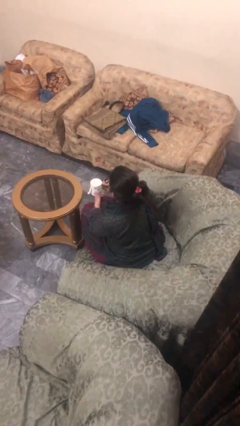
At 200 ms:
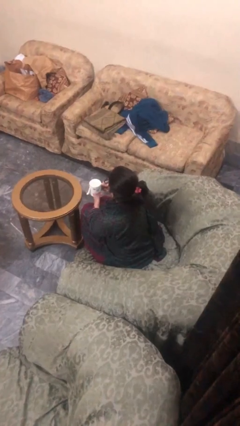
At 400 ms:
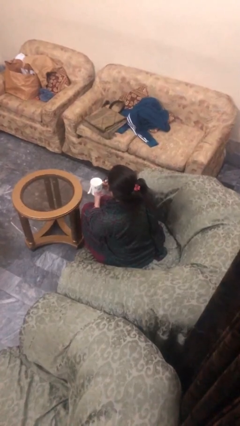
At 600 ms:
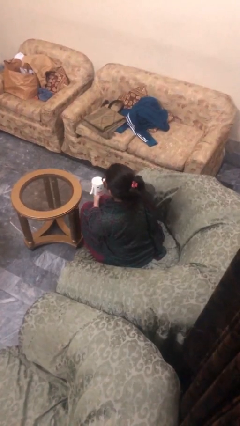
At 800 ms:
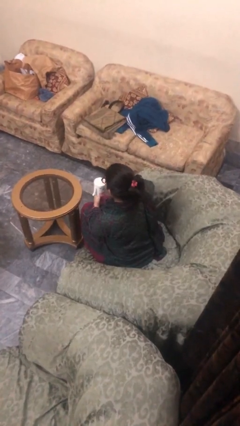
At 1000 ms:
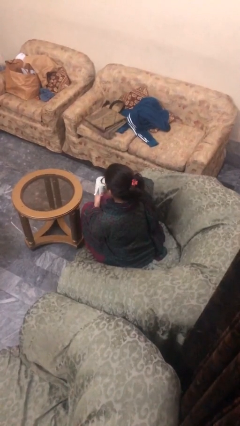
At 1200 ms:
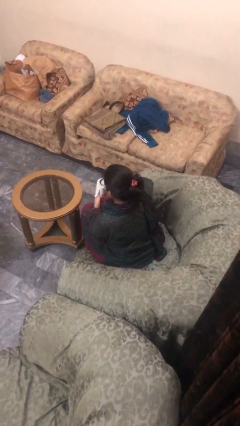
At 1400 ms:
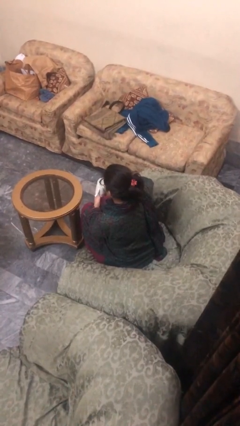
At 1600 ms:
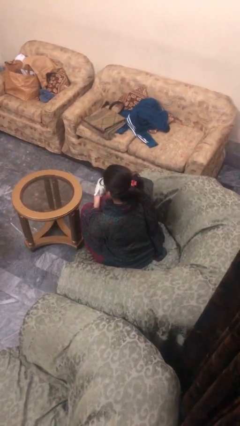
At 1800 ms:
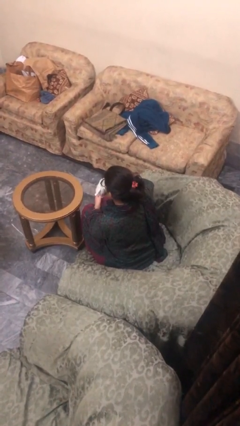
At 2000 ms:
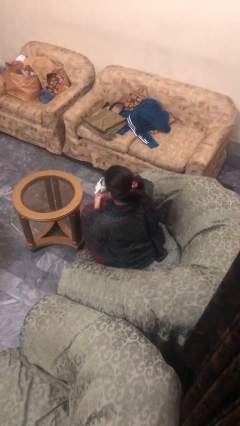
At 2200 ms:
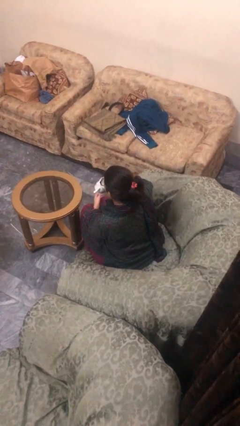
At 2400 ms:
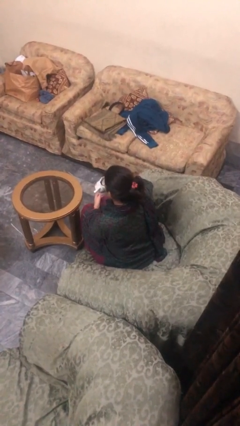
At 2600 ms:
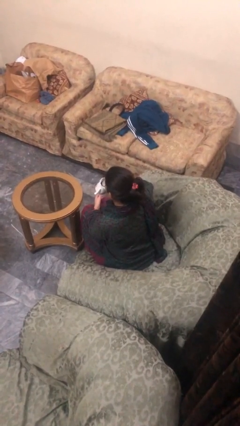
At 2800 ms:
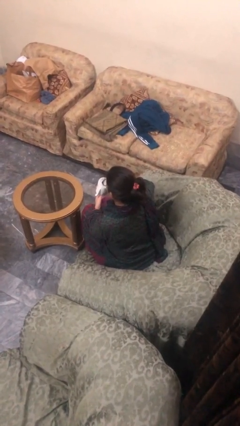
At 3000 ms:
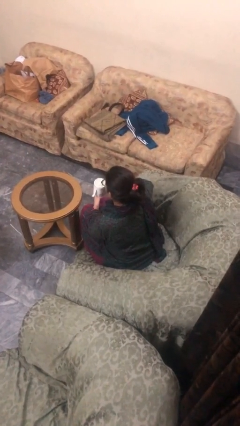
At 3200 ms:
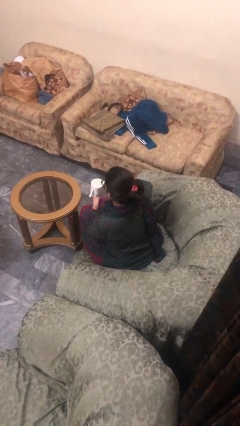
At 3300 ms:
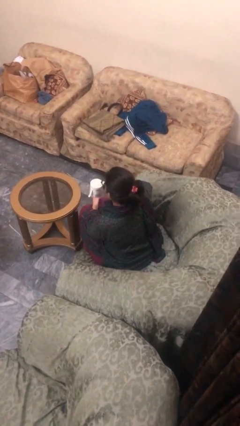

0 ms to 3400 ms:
person drinks from mug

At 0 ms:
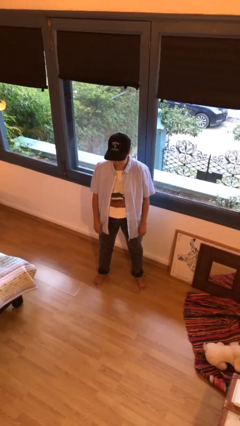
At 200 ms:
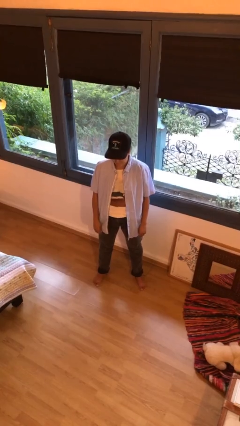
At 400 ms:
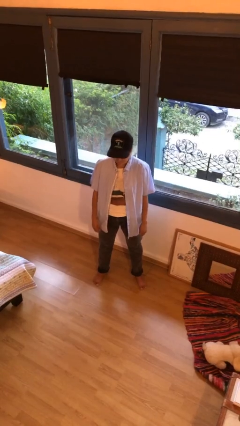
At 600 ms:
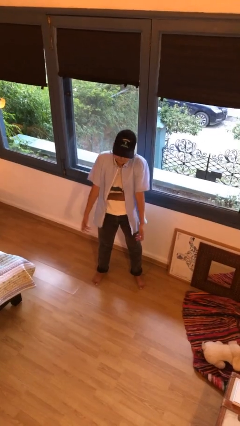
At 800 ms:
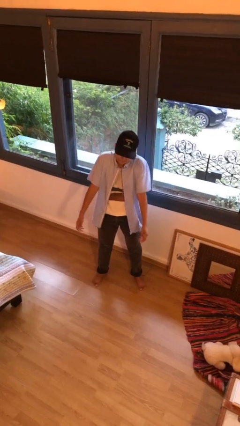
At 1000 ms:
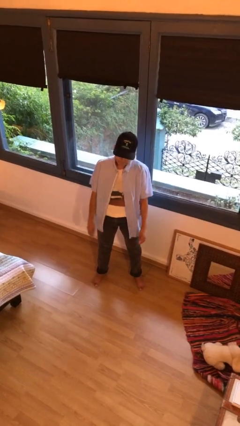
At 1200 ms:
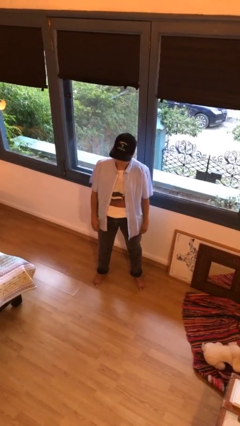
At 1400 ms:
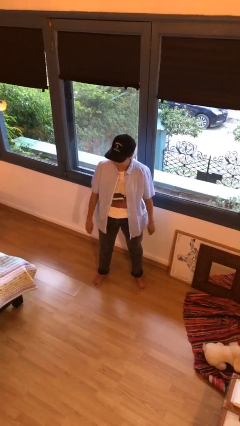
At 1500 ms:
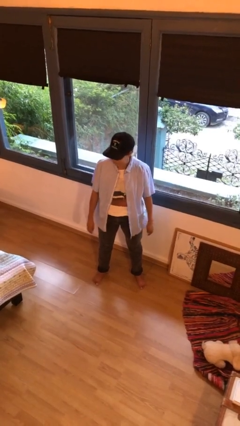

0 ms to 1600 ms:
person shrugs

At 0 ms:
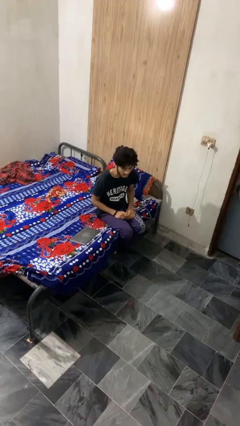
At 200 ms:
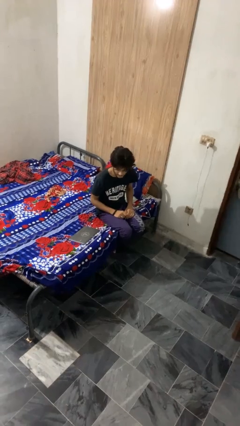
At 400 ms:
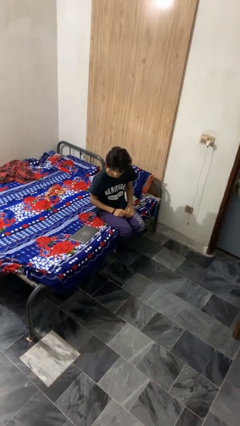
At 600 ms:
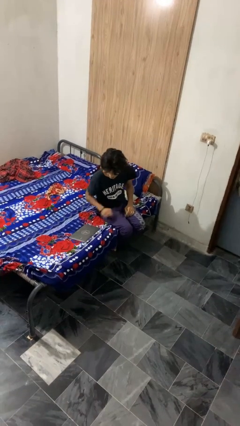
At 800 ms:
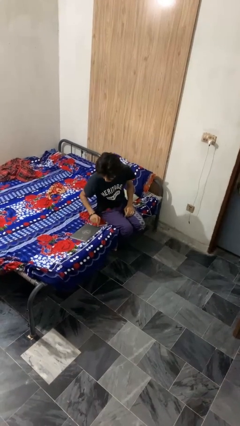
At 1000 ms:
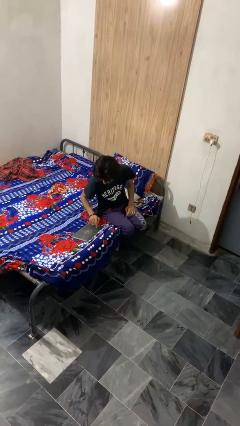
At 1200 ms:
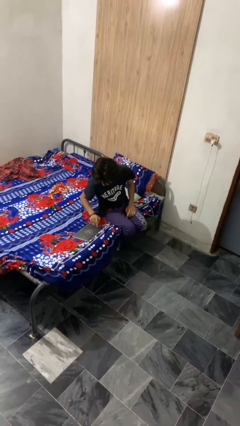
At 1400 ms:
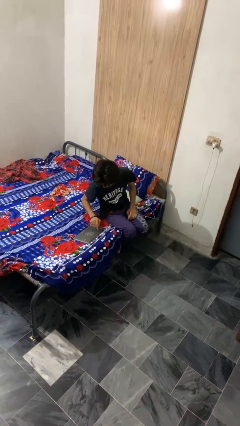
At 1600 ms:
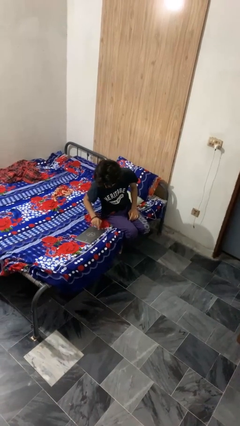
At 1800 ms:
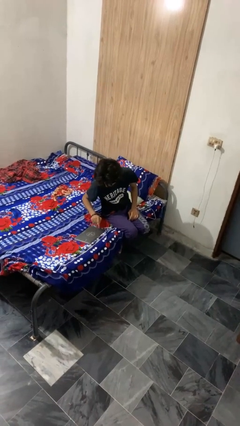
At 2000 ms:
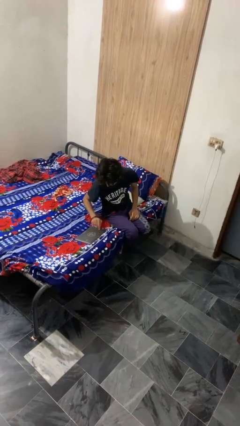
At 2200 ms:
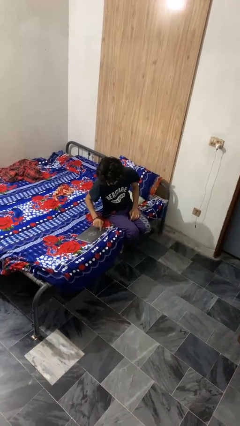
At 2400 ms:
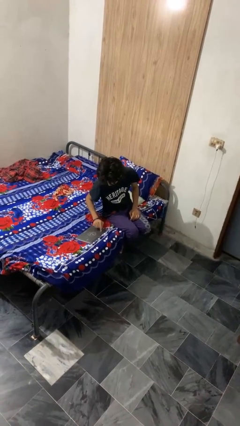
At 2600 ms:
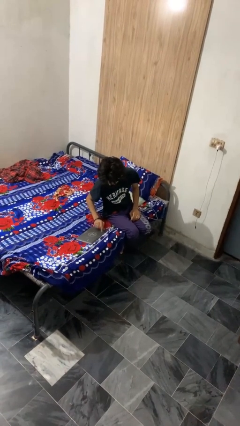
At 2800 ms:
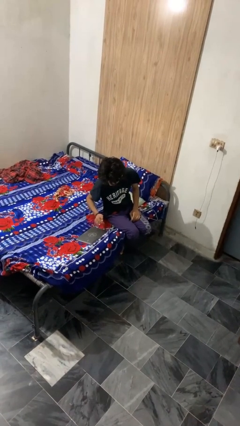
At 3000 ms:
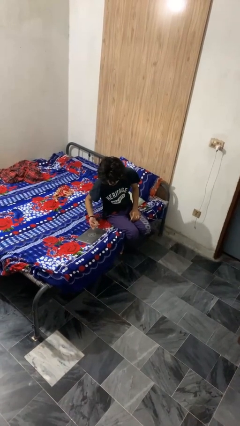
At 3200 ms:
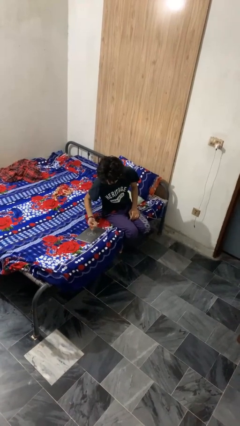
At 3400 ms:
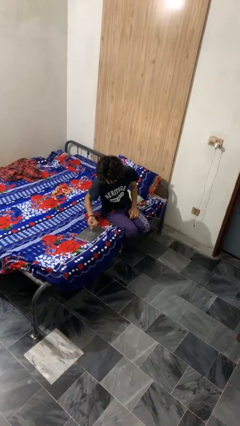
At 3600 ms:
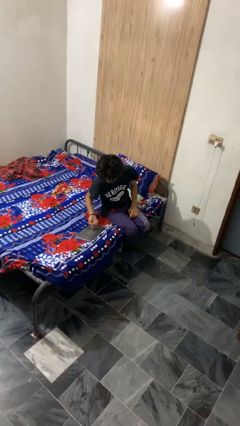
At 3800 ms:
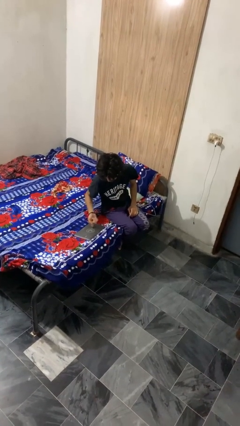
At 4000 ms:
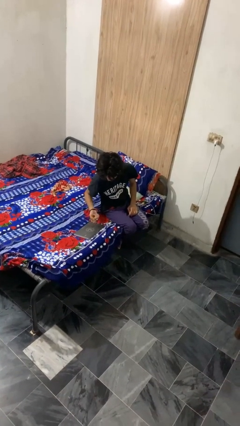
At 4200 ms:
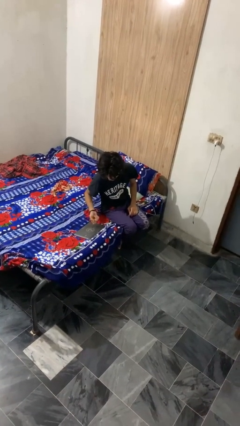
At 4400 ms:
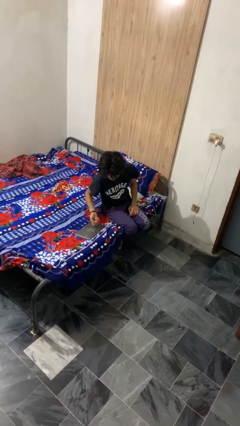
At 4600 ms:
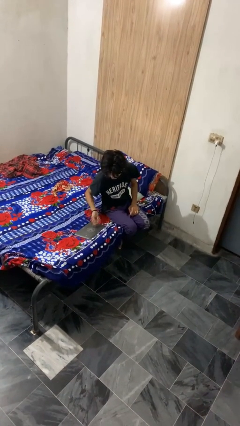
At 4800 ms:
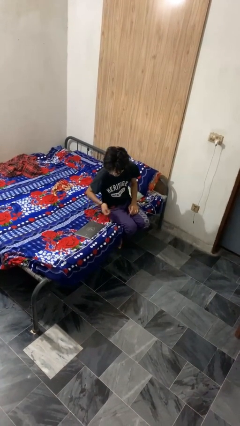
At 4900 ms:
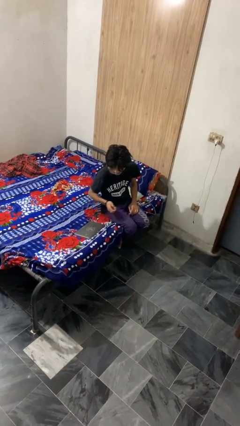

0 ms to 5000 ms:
person taps object with finger

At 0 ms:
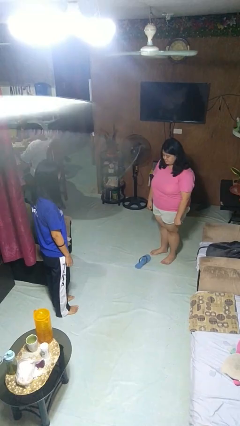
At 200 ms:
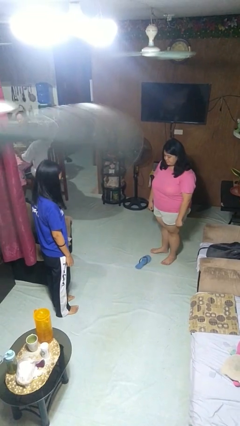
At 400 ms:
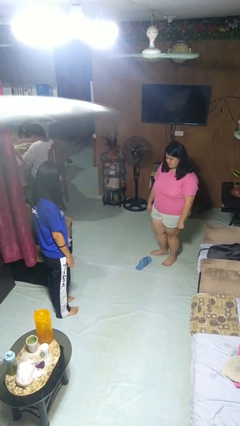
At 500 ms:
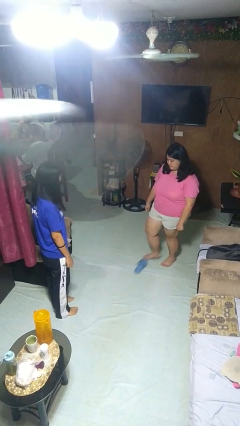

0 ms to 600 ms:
person kicks object to person

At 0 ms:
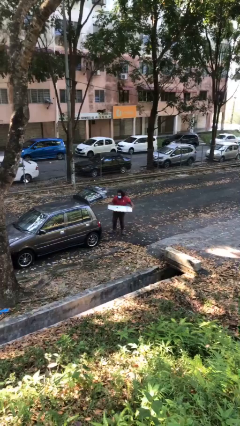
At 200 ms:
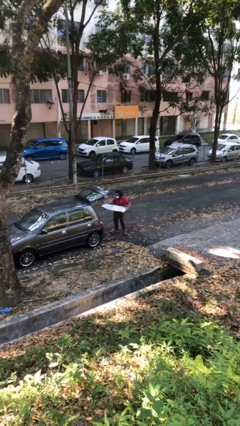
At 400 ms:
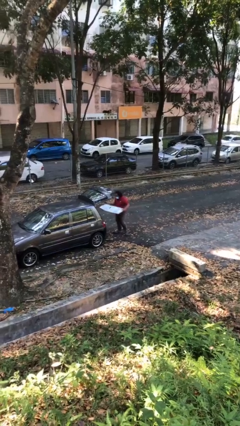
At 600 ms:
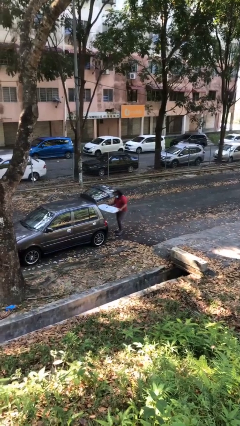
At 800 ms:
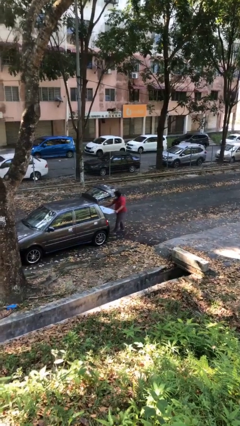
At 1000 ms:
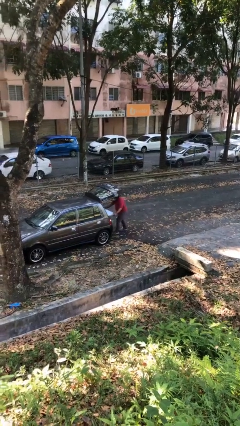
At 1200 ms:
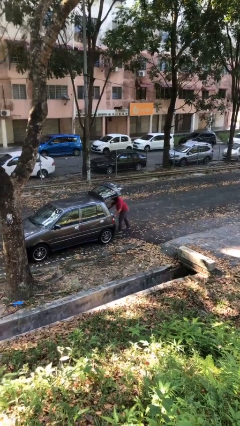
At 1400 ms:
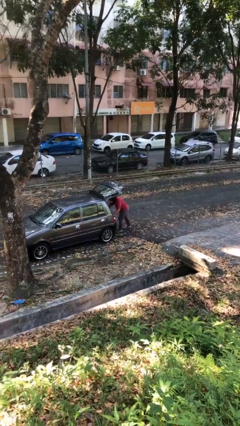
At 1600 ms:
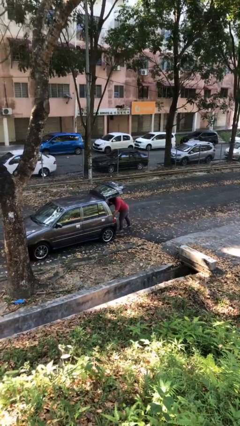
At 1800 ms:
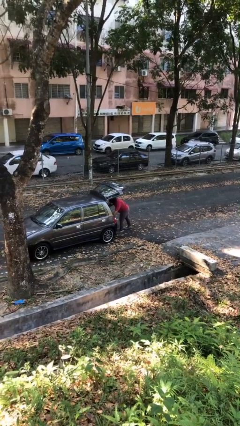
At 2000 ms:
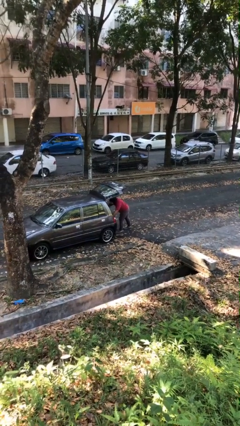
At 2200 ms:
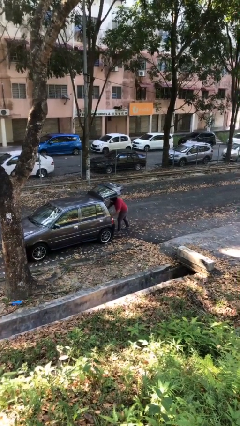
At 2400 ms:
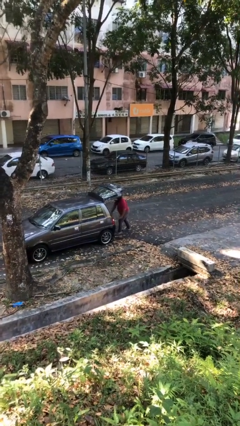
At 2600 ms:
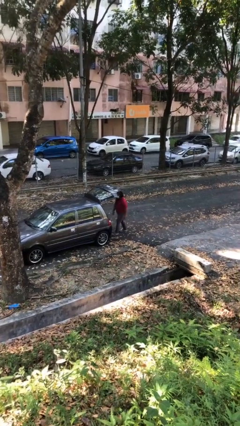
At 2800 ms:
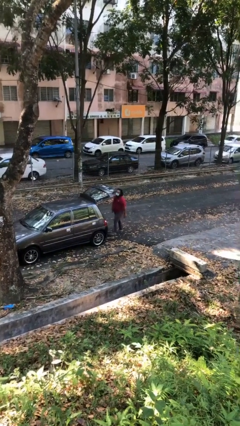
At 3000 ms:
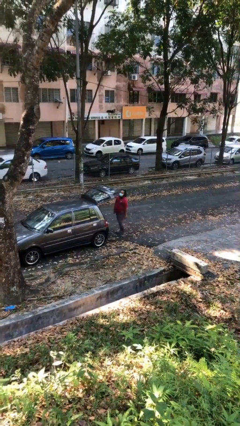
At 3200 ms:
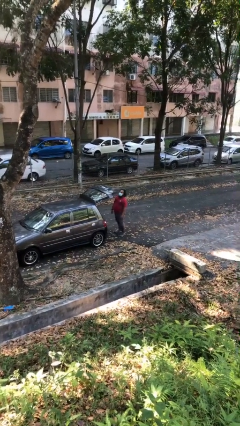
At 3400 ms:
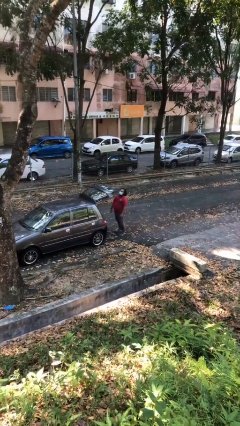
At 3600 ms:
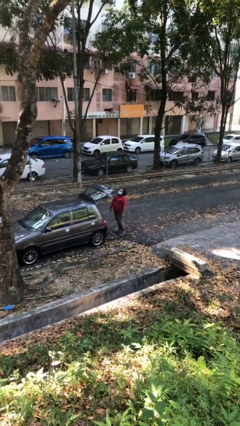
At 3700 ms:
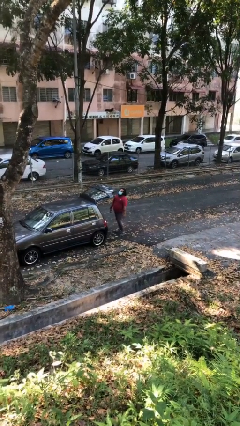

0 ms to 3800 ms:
person loads car

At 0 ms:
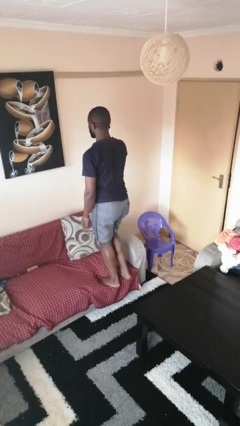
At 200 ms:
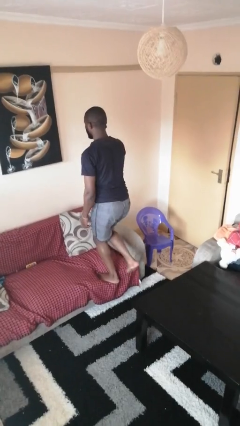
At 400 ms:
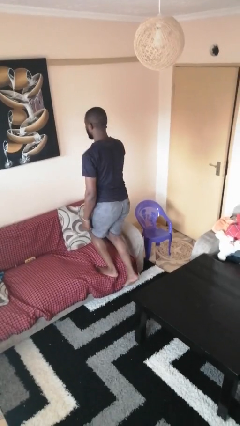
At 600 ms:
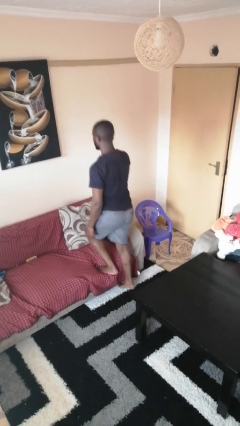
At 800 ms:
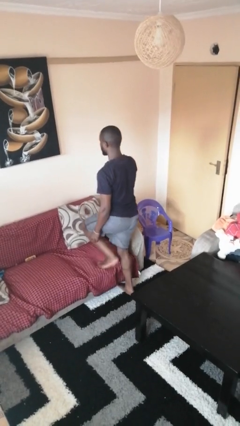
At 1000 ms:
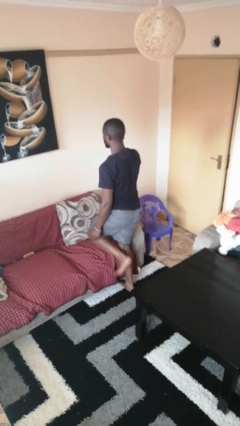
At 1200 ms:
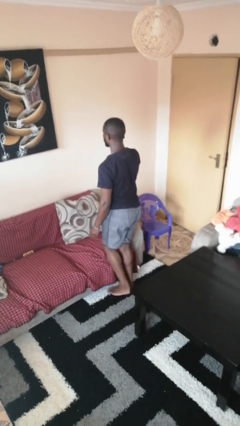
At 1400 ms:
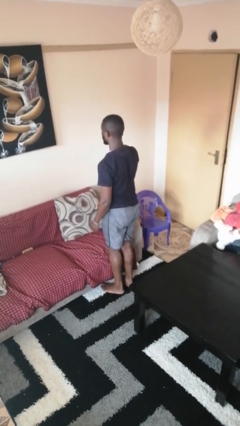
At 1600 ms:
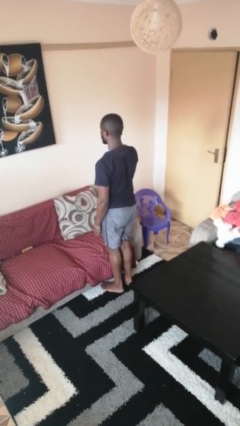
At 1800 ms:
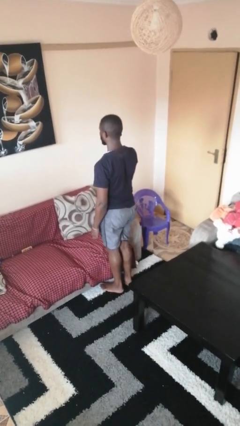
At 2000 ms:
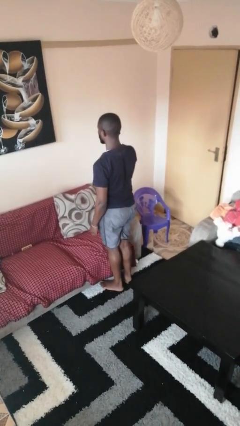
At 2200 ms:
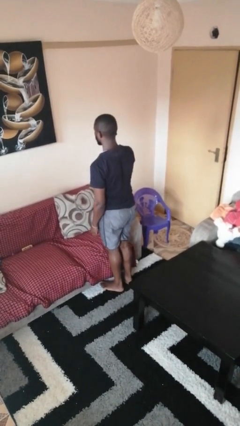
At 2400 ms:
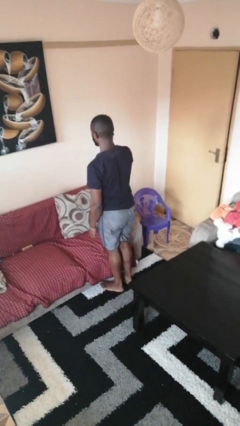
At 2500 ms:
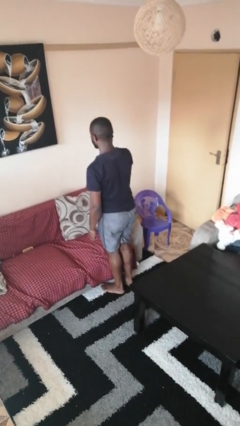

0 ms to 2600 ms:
person climbs off couch

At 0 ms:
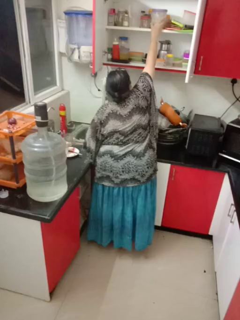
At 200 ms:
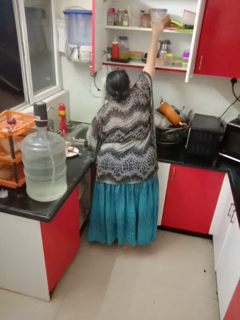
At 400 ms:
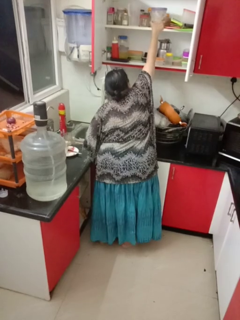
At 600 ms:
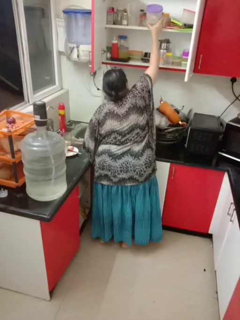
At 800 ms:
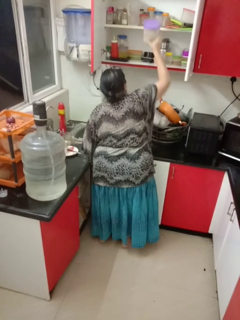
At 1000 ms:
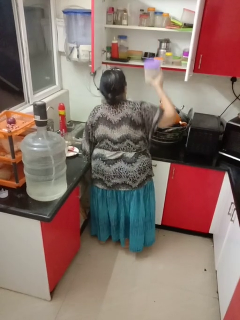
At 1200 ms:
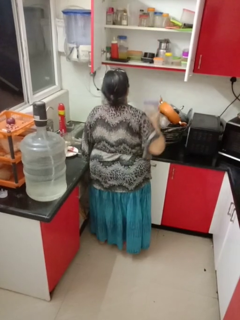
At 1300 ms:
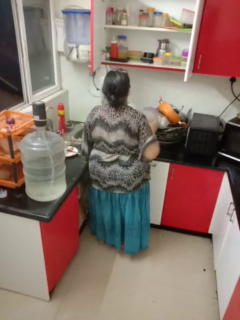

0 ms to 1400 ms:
person takes object from cabinet
